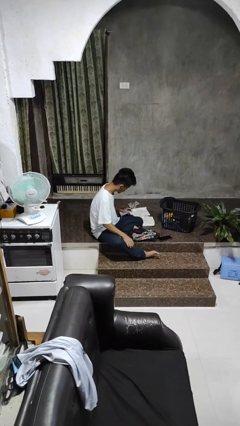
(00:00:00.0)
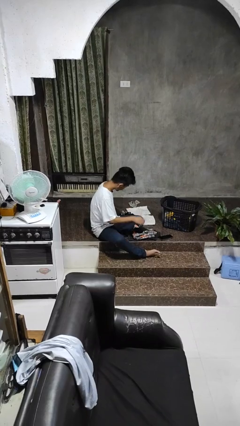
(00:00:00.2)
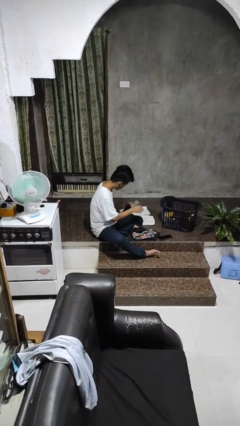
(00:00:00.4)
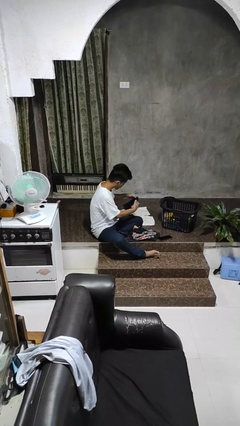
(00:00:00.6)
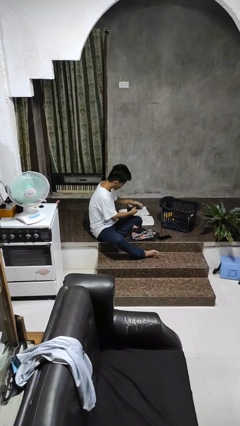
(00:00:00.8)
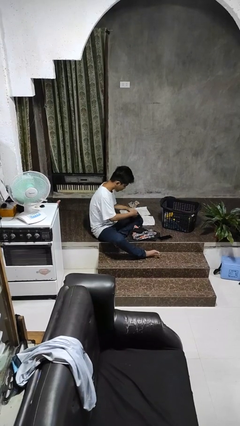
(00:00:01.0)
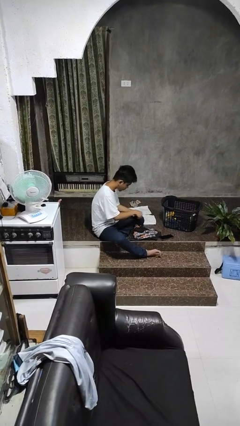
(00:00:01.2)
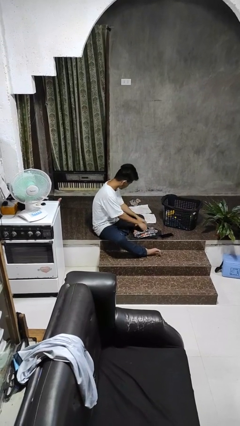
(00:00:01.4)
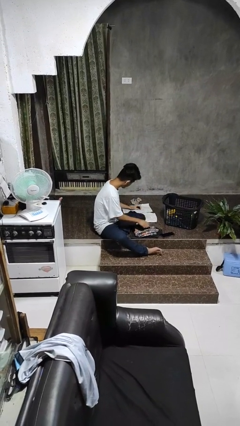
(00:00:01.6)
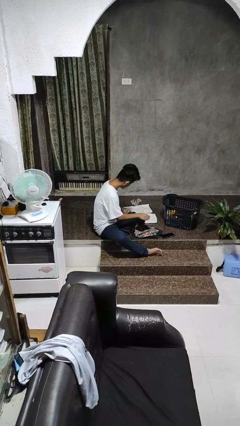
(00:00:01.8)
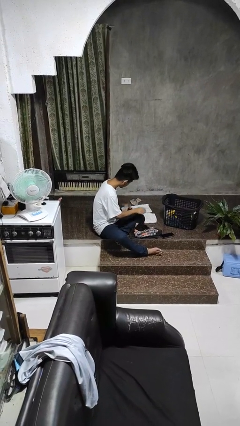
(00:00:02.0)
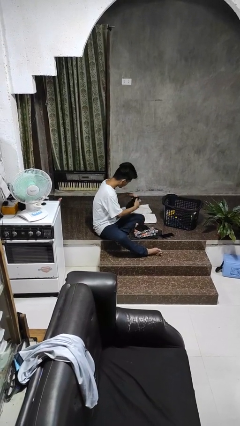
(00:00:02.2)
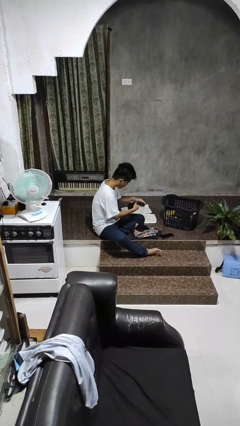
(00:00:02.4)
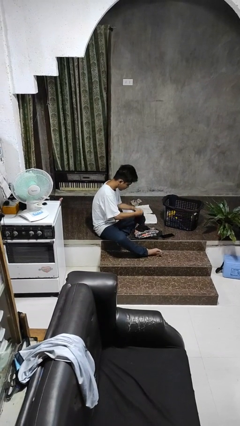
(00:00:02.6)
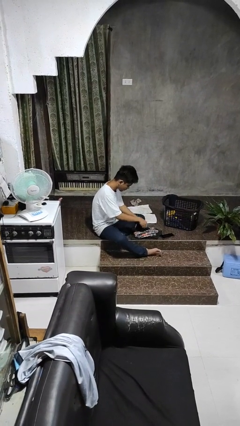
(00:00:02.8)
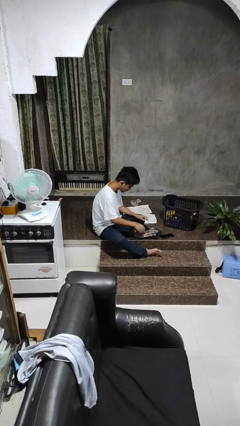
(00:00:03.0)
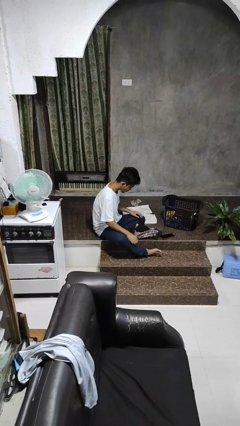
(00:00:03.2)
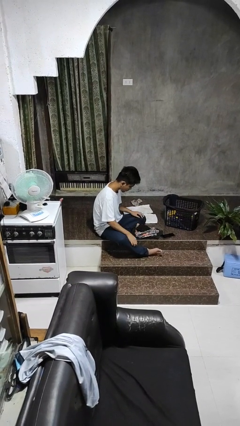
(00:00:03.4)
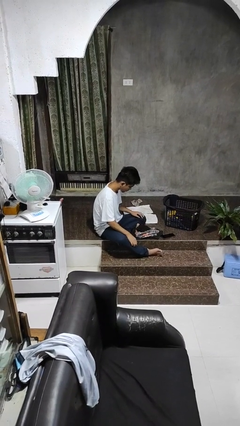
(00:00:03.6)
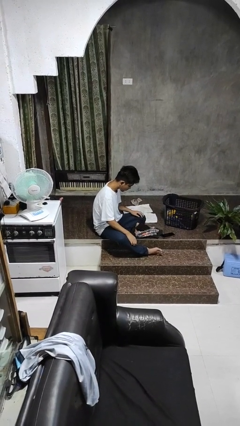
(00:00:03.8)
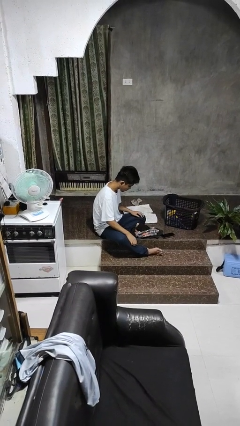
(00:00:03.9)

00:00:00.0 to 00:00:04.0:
person folds socks

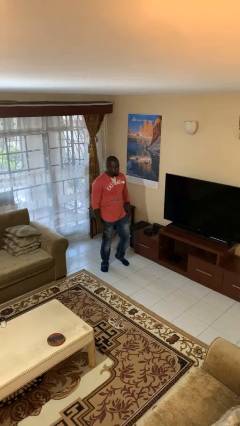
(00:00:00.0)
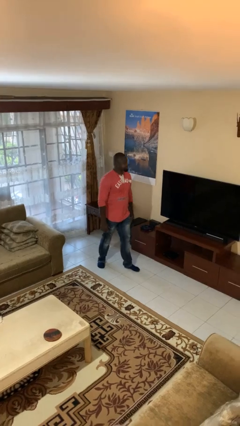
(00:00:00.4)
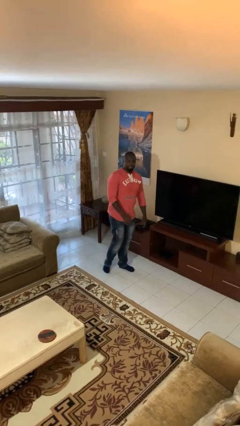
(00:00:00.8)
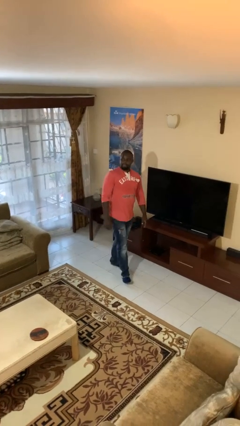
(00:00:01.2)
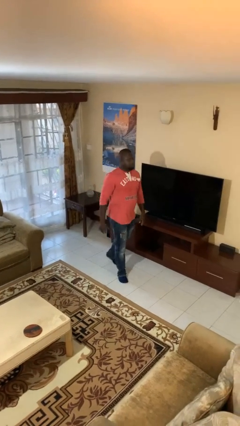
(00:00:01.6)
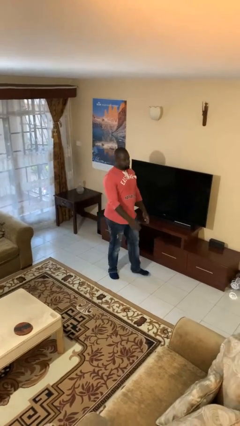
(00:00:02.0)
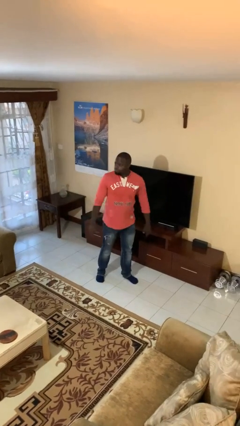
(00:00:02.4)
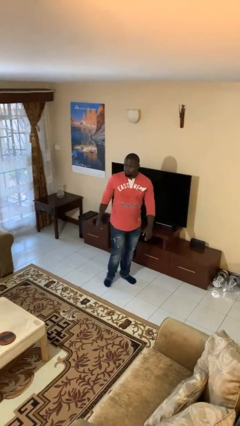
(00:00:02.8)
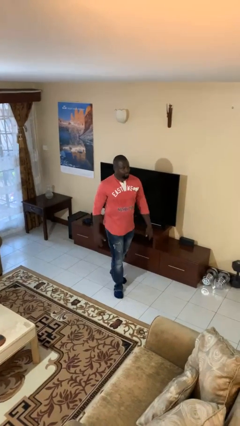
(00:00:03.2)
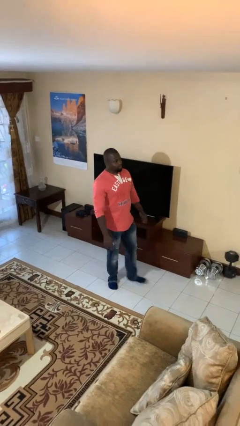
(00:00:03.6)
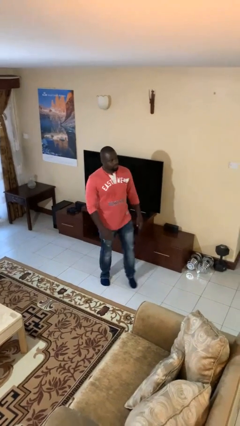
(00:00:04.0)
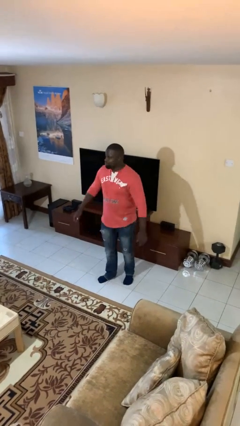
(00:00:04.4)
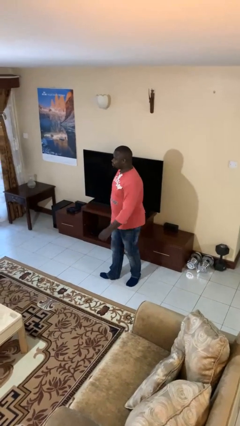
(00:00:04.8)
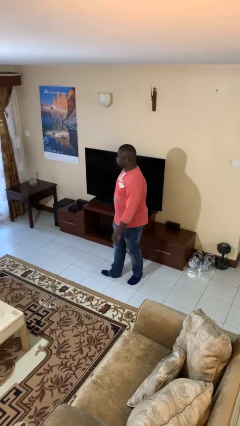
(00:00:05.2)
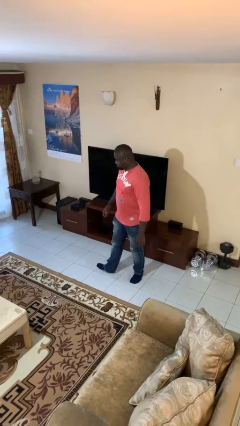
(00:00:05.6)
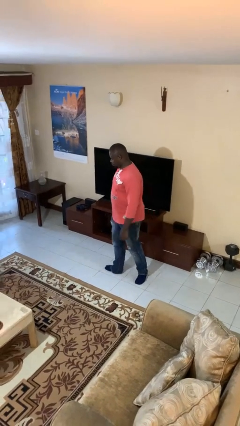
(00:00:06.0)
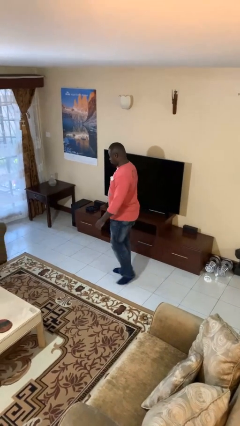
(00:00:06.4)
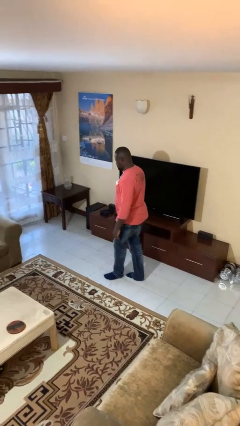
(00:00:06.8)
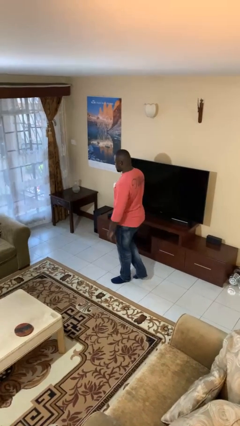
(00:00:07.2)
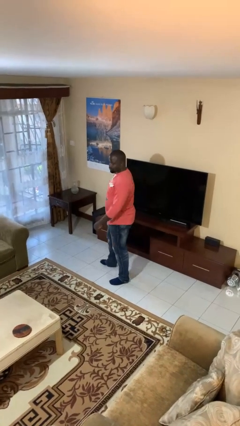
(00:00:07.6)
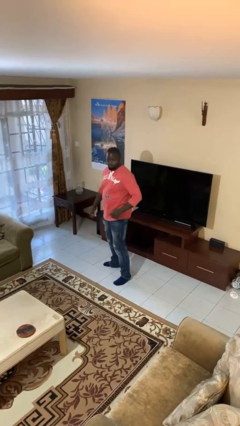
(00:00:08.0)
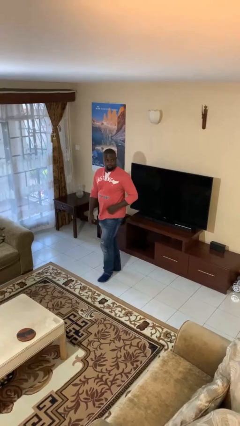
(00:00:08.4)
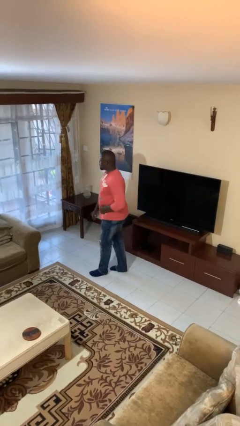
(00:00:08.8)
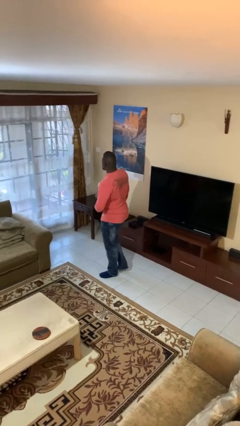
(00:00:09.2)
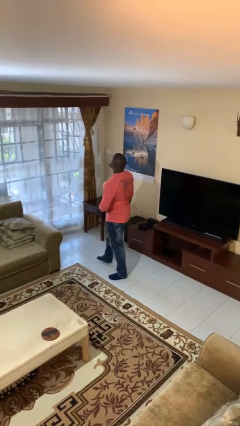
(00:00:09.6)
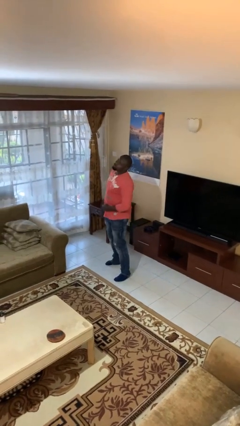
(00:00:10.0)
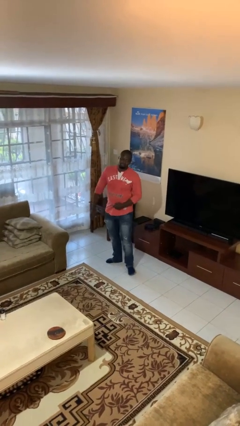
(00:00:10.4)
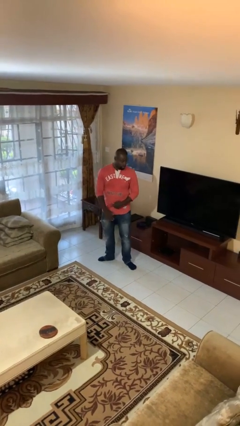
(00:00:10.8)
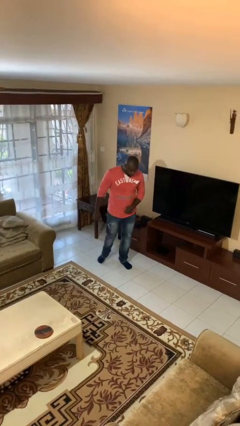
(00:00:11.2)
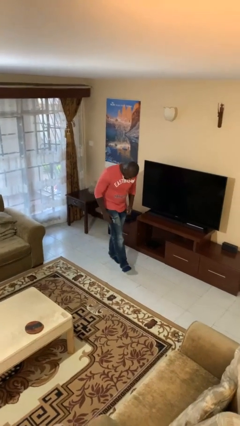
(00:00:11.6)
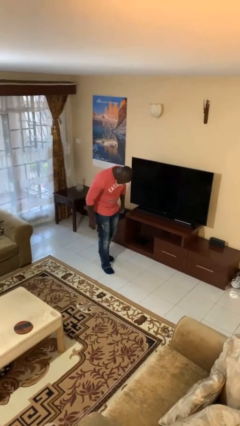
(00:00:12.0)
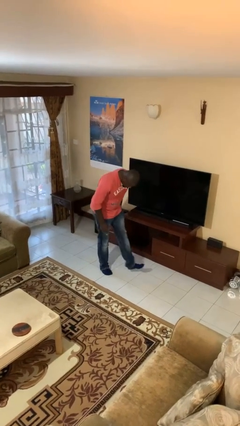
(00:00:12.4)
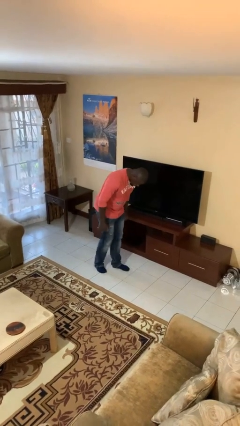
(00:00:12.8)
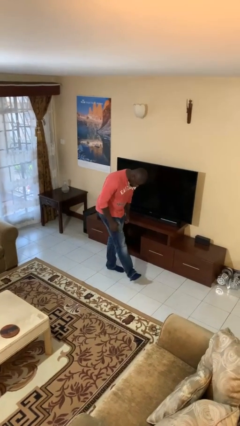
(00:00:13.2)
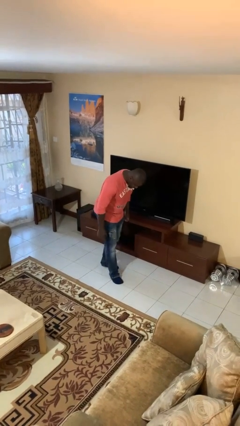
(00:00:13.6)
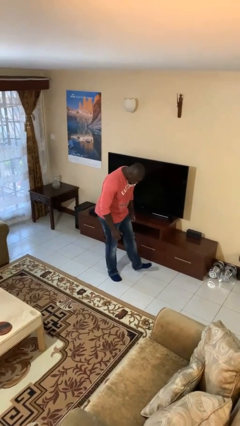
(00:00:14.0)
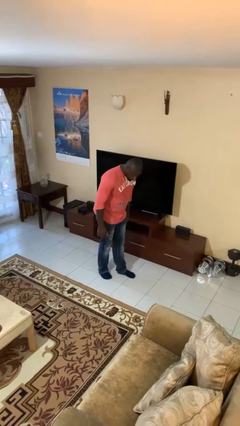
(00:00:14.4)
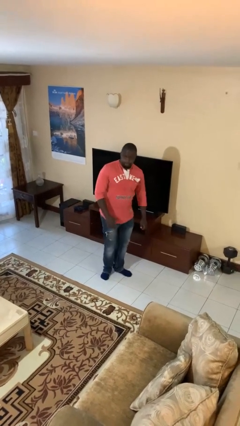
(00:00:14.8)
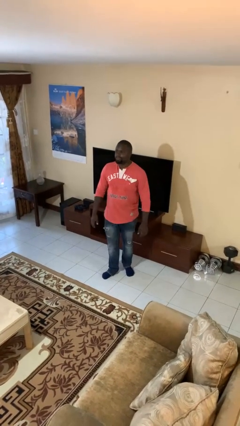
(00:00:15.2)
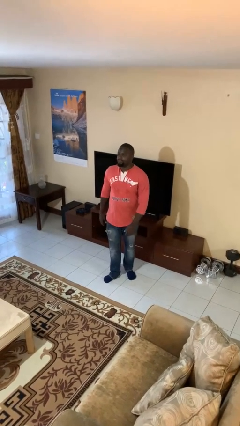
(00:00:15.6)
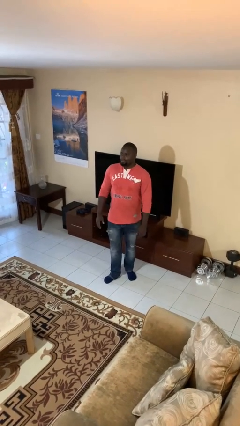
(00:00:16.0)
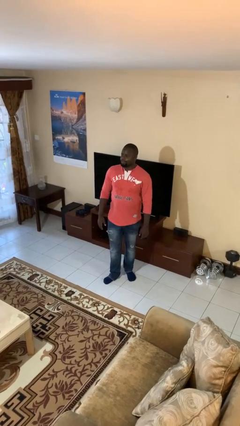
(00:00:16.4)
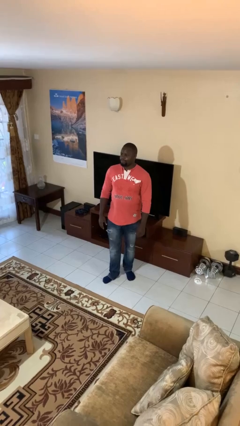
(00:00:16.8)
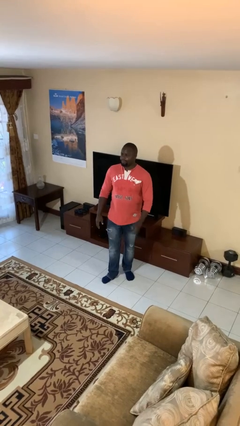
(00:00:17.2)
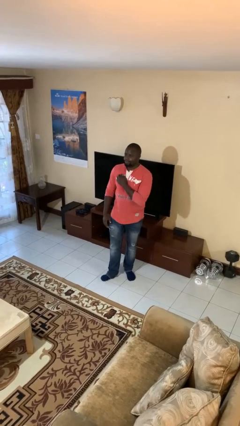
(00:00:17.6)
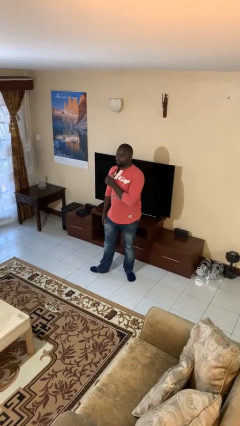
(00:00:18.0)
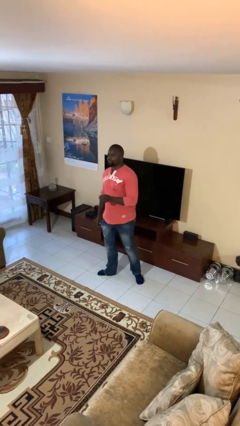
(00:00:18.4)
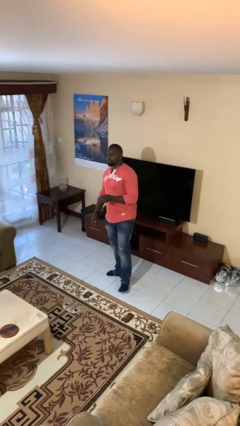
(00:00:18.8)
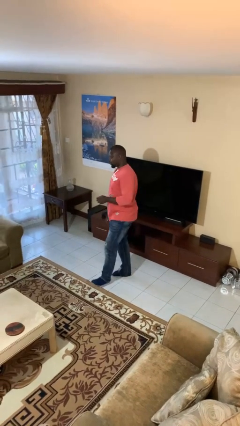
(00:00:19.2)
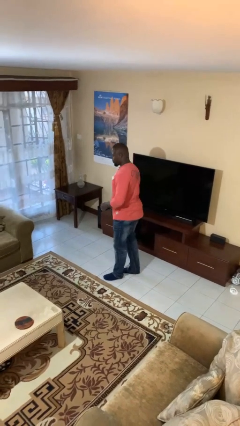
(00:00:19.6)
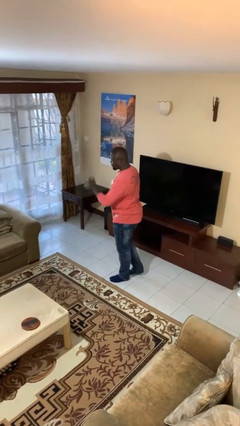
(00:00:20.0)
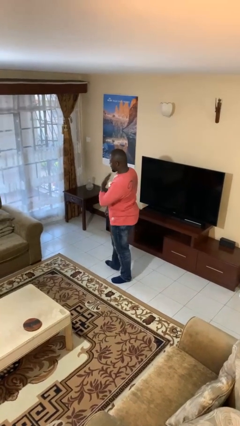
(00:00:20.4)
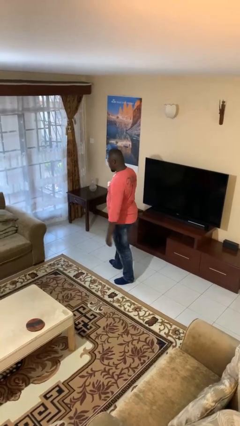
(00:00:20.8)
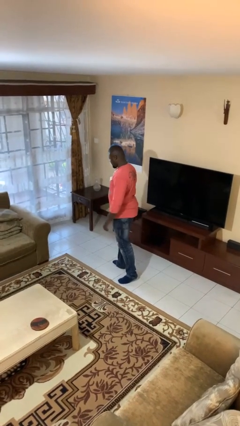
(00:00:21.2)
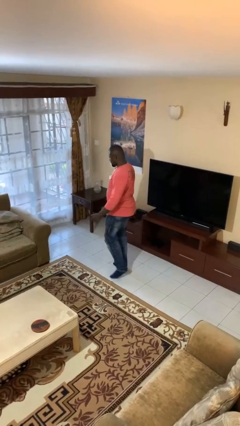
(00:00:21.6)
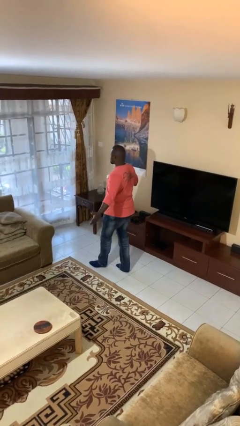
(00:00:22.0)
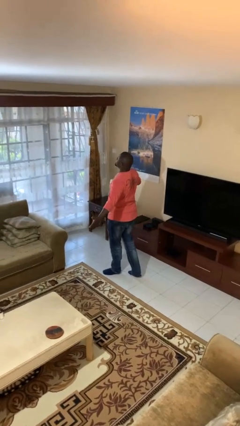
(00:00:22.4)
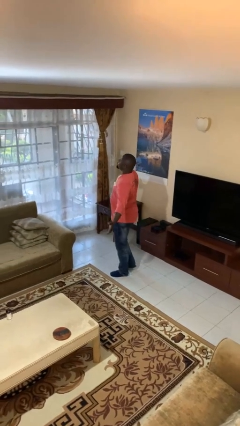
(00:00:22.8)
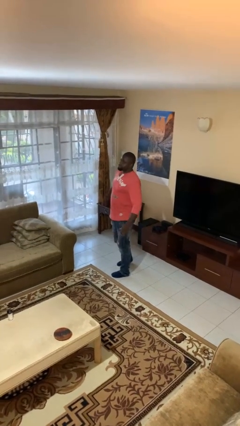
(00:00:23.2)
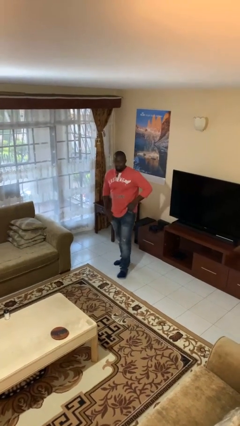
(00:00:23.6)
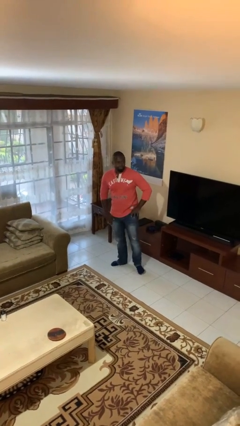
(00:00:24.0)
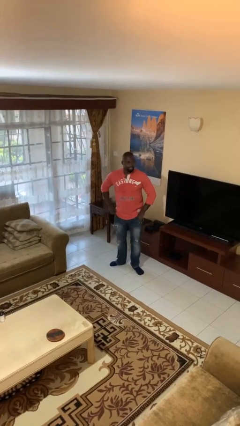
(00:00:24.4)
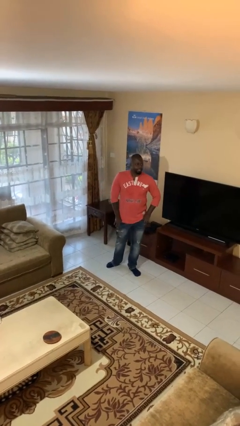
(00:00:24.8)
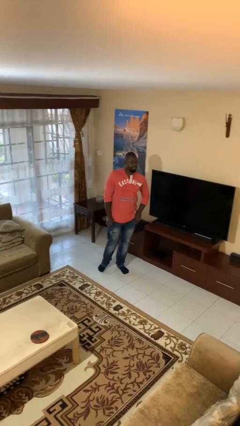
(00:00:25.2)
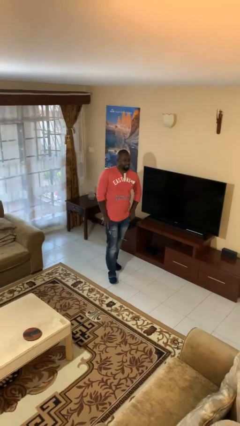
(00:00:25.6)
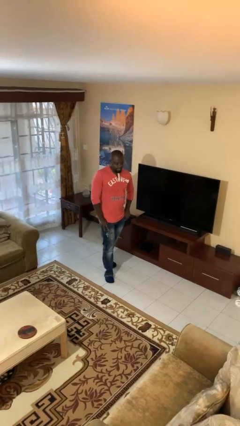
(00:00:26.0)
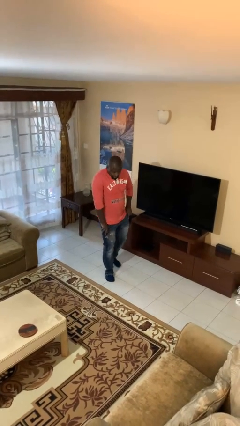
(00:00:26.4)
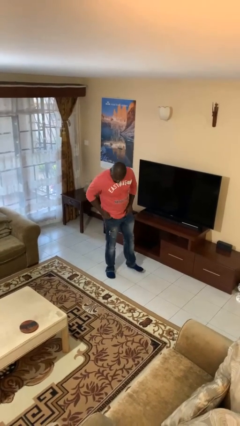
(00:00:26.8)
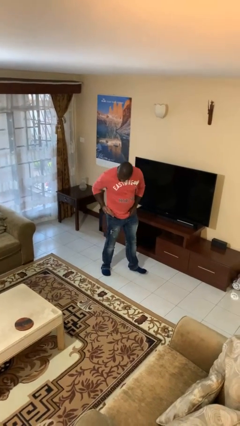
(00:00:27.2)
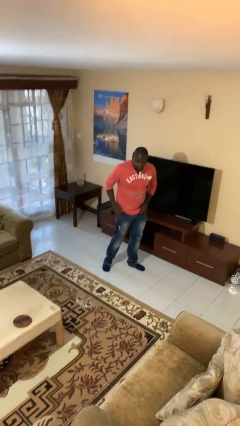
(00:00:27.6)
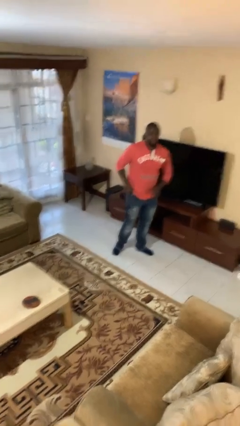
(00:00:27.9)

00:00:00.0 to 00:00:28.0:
person walks

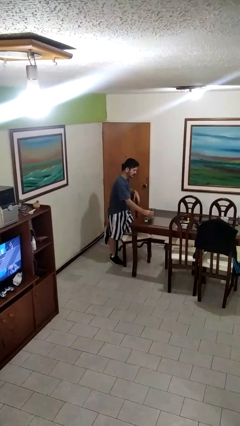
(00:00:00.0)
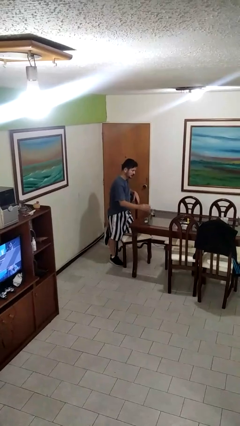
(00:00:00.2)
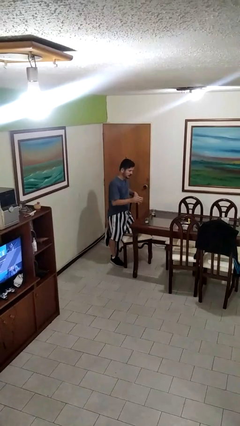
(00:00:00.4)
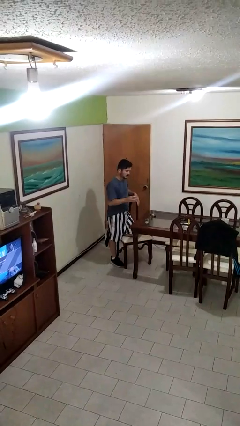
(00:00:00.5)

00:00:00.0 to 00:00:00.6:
person picks up object from table
